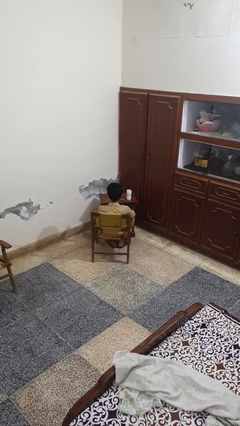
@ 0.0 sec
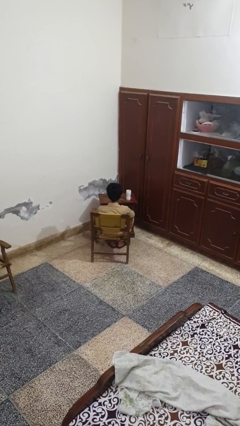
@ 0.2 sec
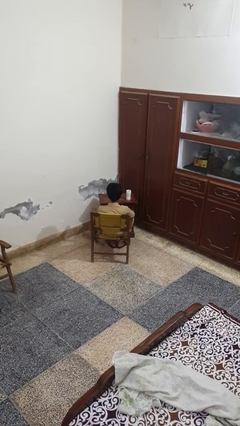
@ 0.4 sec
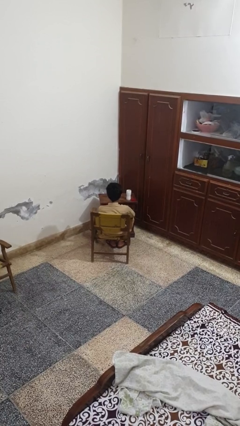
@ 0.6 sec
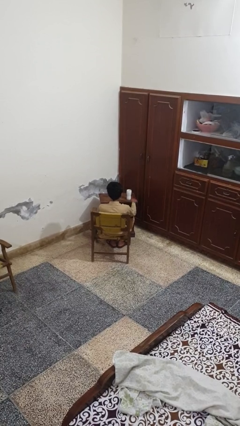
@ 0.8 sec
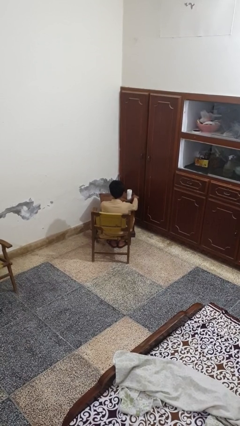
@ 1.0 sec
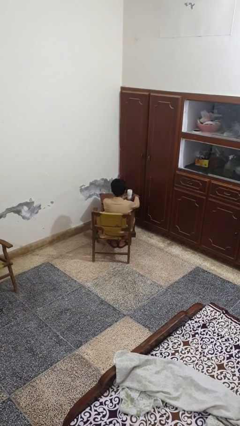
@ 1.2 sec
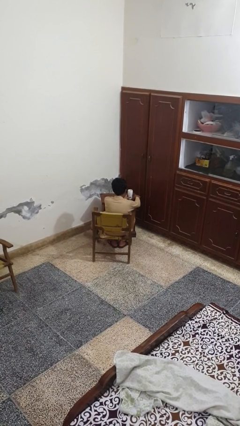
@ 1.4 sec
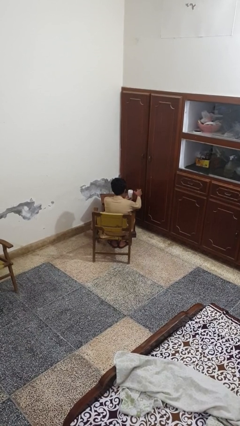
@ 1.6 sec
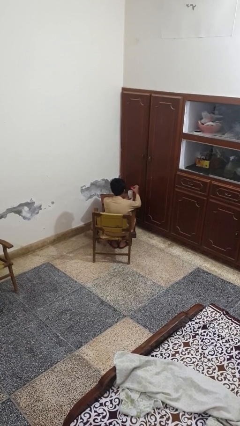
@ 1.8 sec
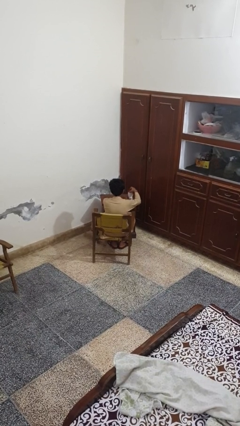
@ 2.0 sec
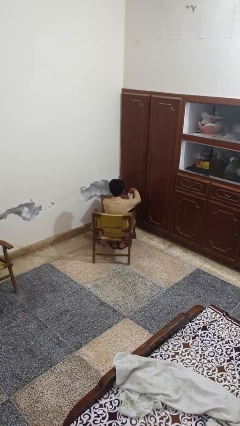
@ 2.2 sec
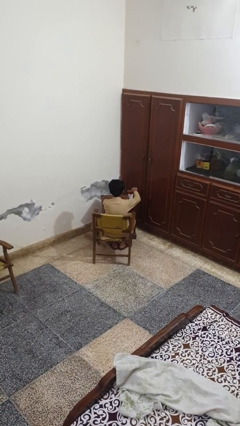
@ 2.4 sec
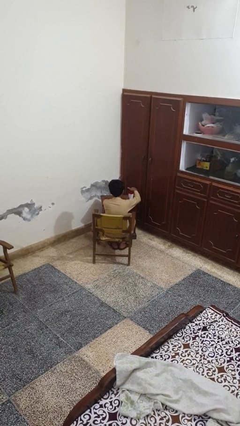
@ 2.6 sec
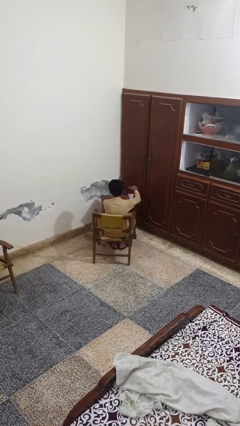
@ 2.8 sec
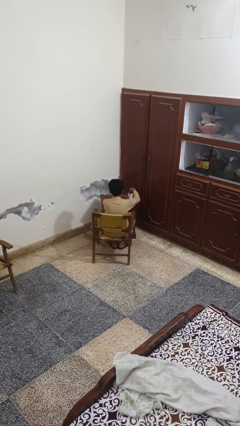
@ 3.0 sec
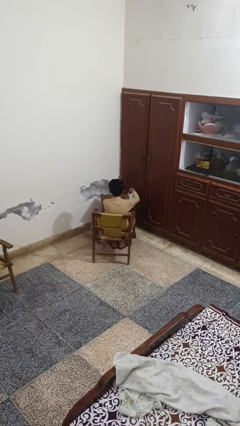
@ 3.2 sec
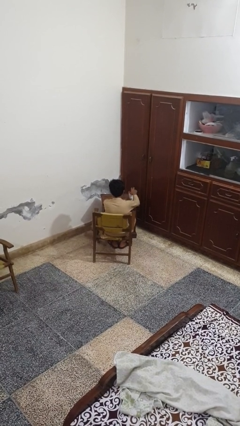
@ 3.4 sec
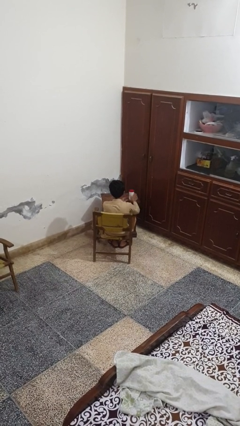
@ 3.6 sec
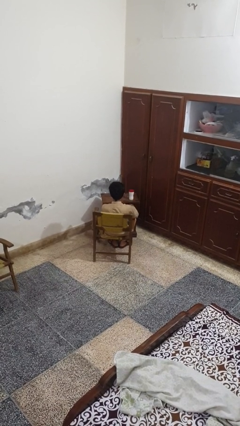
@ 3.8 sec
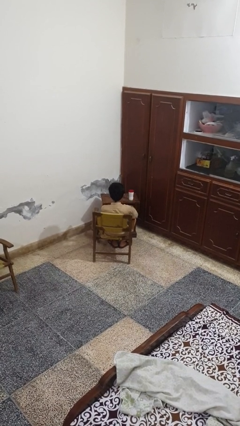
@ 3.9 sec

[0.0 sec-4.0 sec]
person closes jar

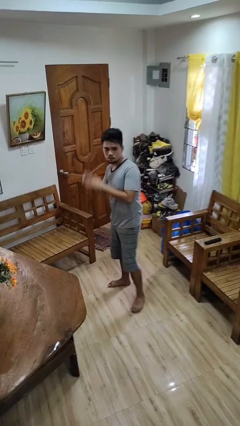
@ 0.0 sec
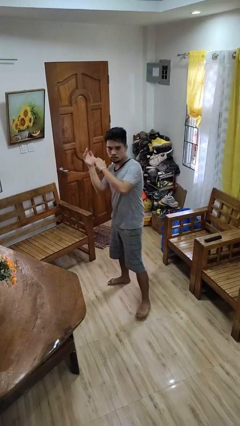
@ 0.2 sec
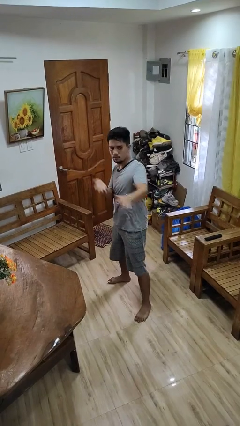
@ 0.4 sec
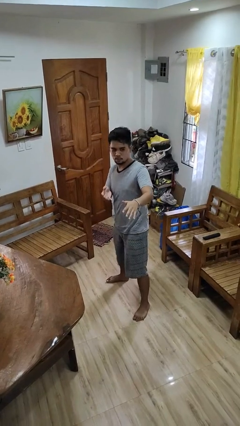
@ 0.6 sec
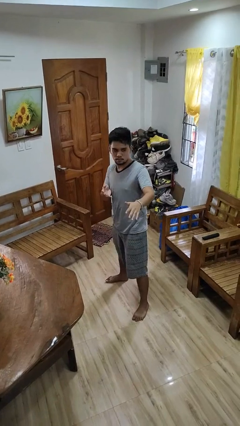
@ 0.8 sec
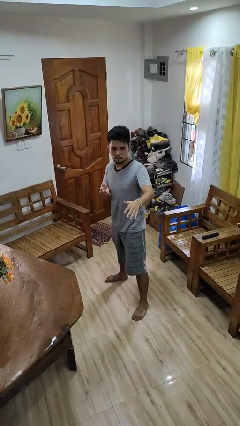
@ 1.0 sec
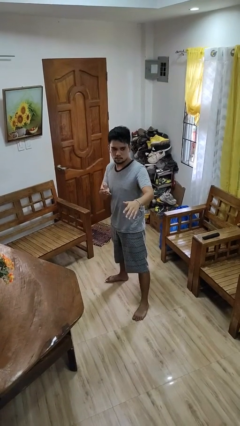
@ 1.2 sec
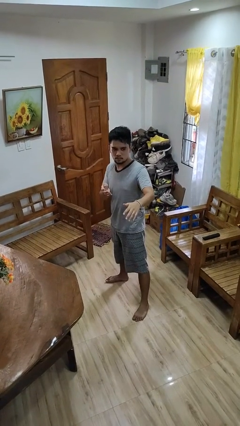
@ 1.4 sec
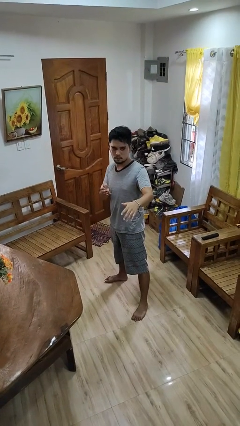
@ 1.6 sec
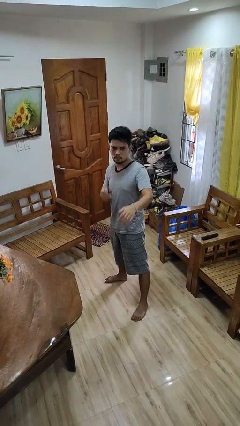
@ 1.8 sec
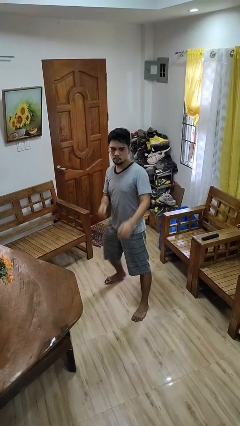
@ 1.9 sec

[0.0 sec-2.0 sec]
person karate chop

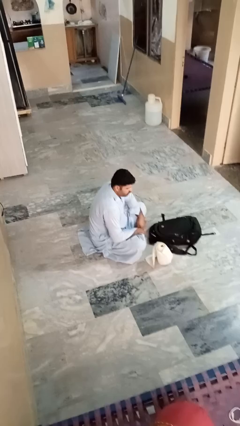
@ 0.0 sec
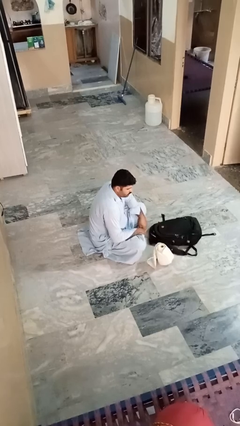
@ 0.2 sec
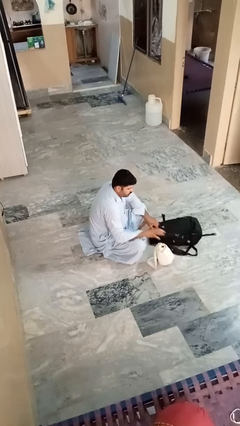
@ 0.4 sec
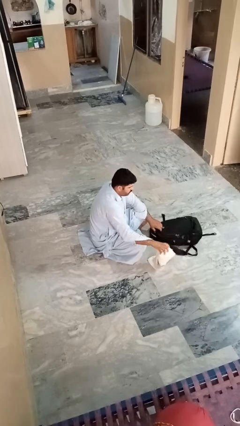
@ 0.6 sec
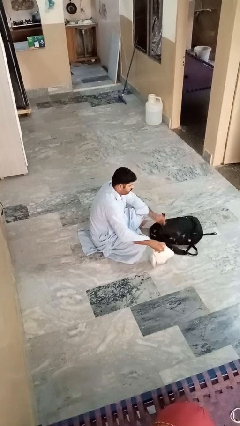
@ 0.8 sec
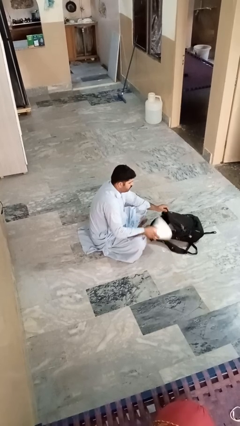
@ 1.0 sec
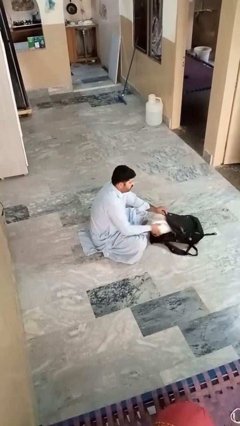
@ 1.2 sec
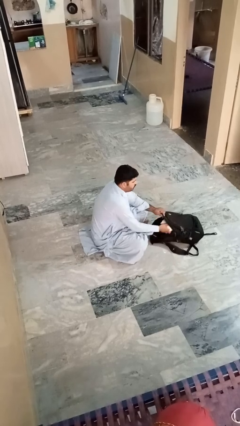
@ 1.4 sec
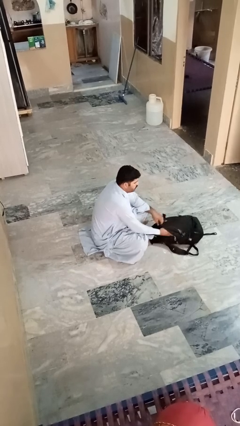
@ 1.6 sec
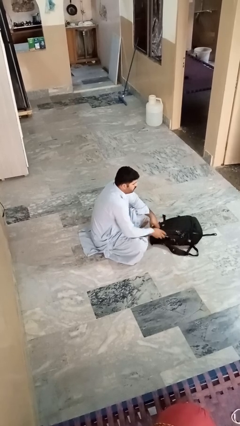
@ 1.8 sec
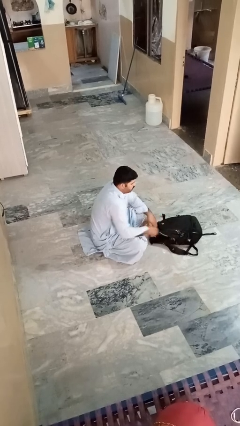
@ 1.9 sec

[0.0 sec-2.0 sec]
person puts object into bag

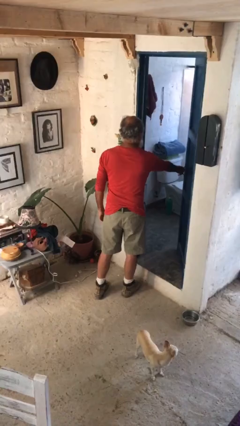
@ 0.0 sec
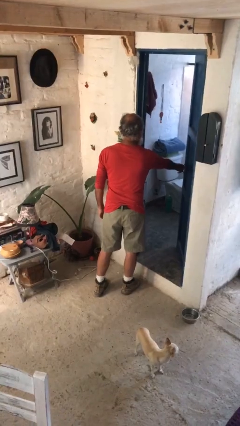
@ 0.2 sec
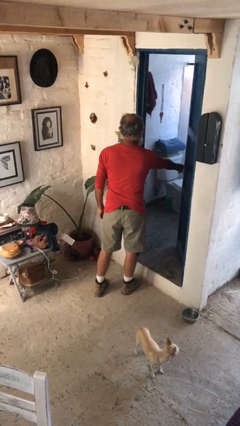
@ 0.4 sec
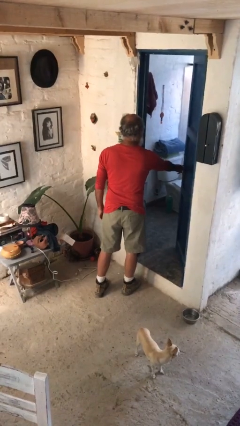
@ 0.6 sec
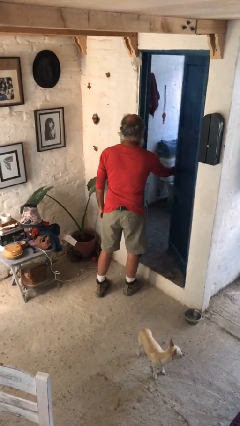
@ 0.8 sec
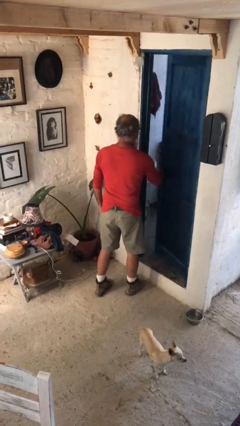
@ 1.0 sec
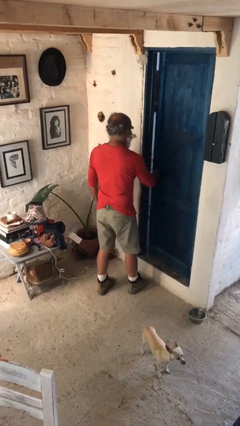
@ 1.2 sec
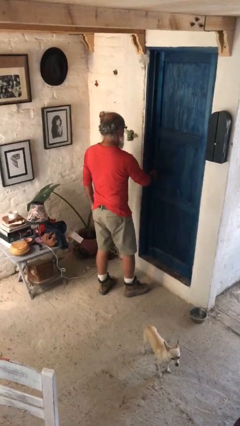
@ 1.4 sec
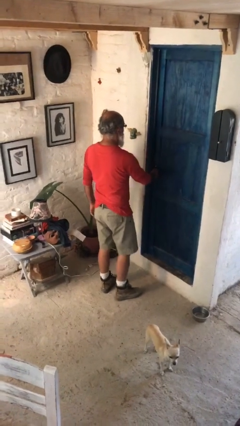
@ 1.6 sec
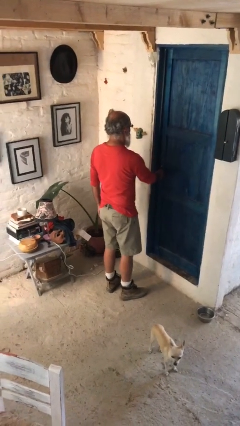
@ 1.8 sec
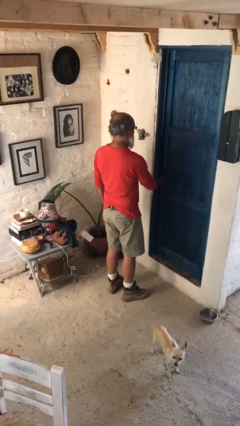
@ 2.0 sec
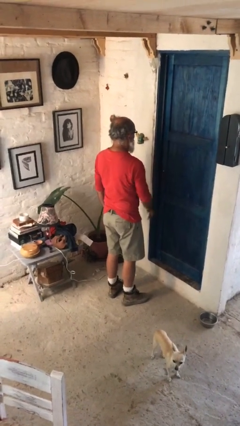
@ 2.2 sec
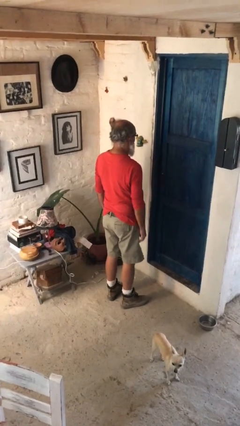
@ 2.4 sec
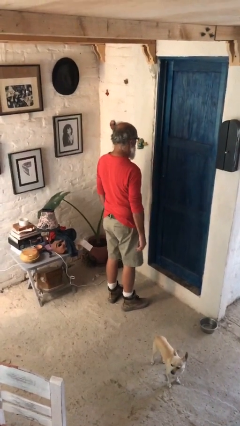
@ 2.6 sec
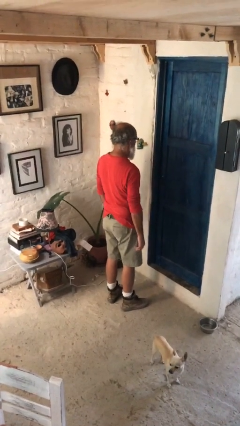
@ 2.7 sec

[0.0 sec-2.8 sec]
person closes facility door

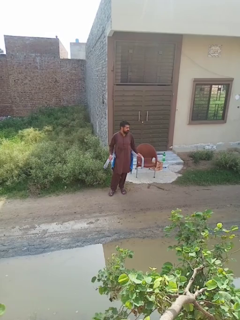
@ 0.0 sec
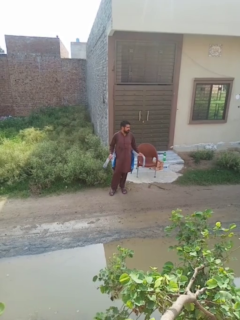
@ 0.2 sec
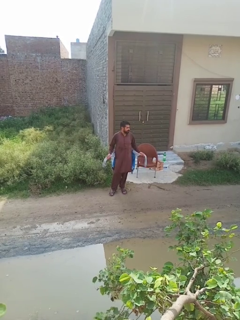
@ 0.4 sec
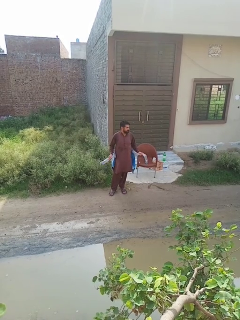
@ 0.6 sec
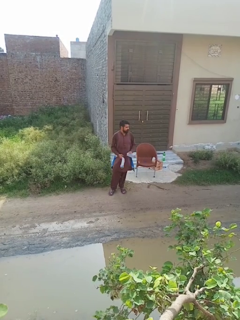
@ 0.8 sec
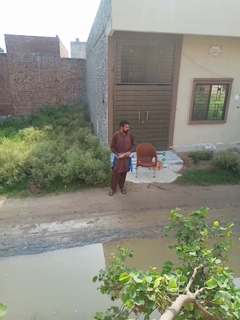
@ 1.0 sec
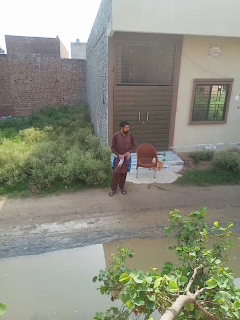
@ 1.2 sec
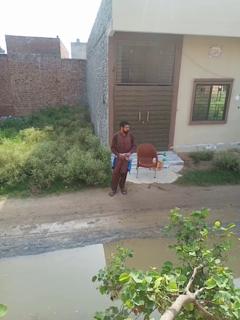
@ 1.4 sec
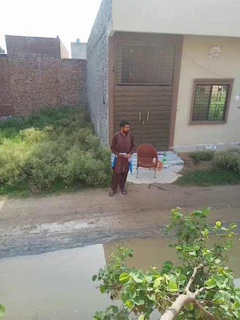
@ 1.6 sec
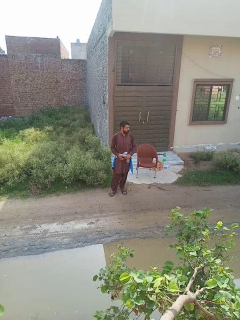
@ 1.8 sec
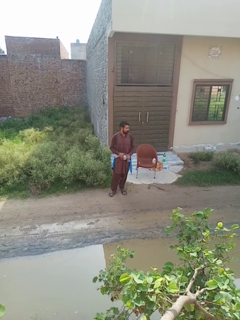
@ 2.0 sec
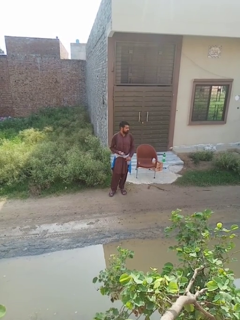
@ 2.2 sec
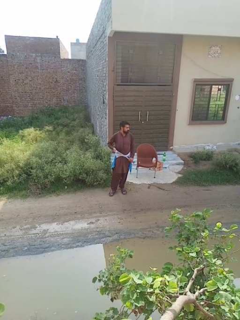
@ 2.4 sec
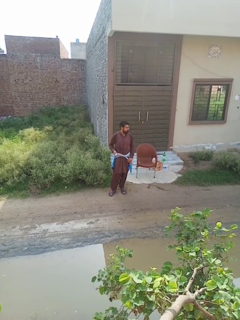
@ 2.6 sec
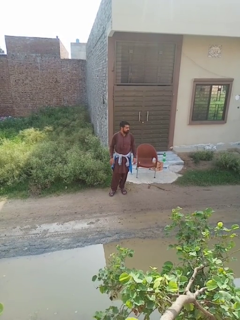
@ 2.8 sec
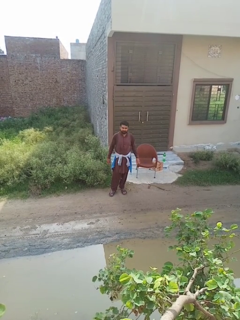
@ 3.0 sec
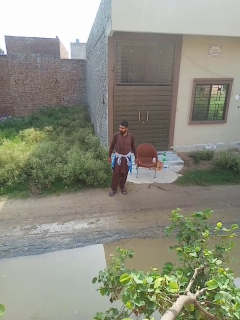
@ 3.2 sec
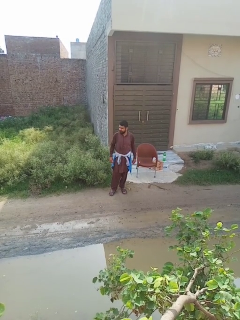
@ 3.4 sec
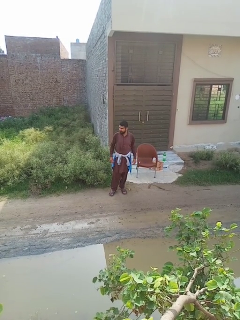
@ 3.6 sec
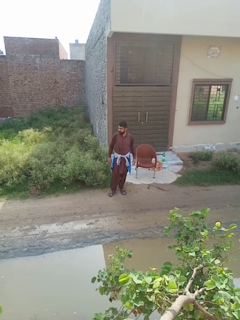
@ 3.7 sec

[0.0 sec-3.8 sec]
person ties jacket around waist

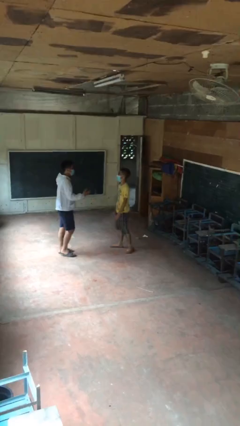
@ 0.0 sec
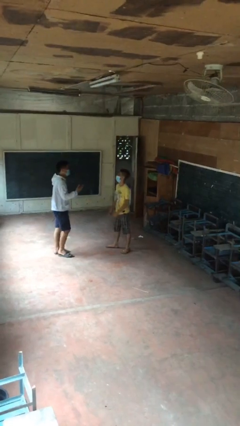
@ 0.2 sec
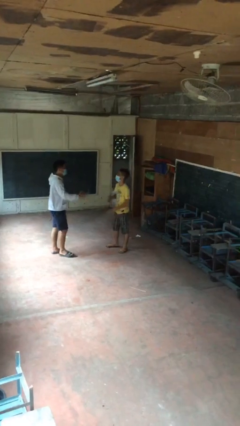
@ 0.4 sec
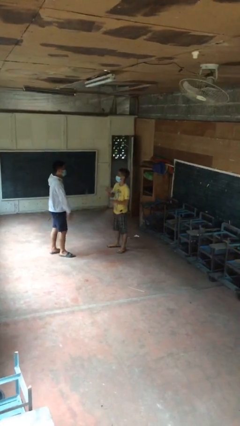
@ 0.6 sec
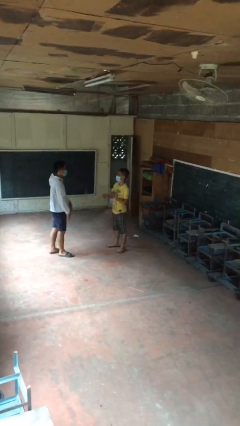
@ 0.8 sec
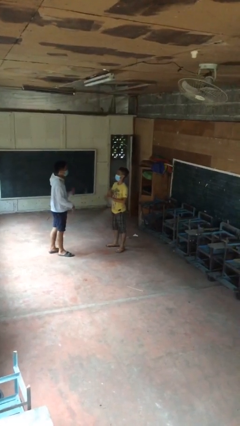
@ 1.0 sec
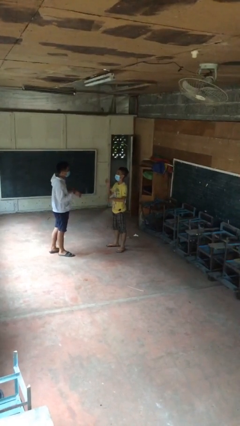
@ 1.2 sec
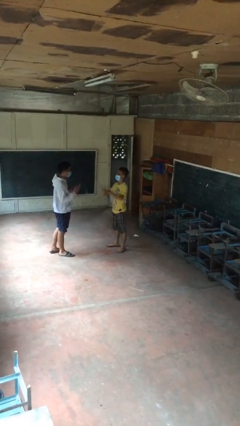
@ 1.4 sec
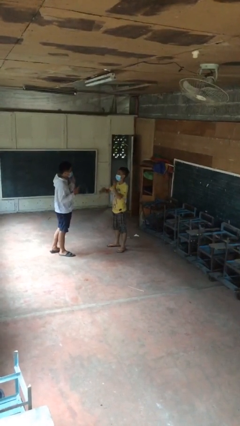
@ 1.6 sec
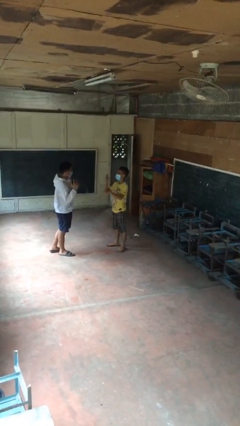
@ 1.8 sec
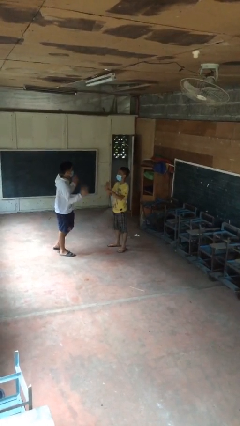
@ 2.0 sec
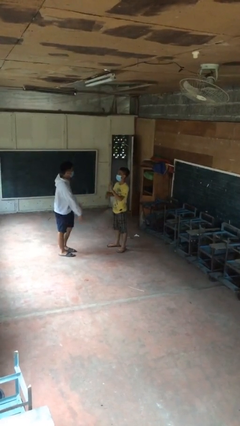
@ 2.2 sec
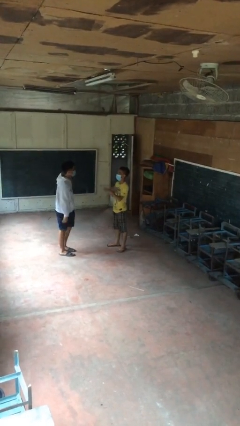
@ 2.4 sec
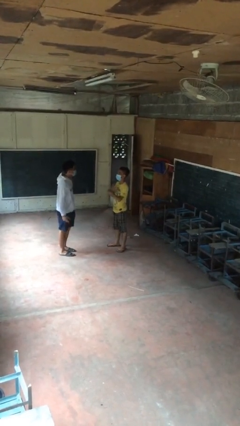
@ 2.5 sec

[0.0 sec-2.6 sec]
person talks to person

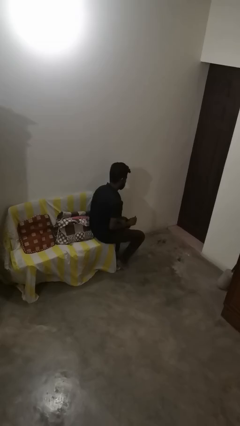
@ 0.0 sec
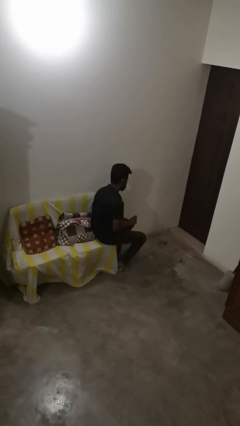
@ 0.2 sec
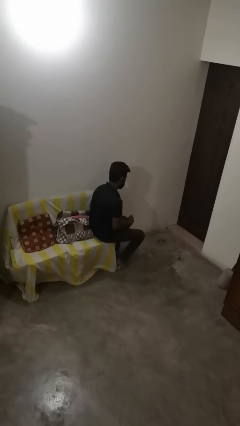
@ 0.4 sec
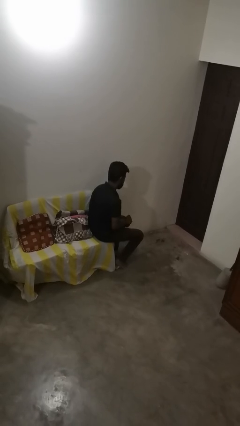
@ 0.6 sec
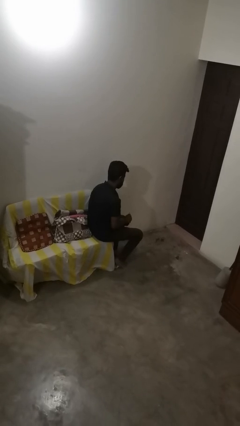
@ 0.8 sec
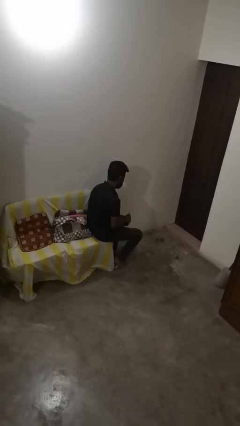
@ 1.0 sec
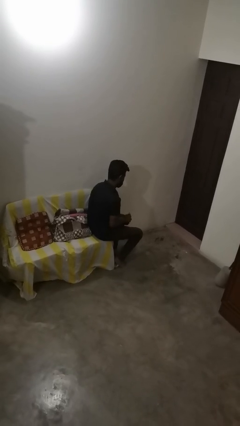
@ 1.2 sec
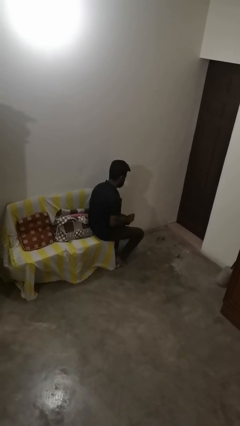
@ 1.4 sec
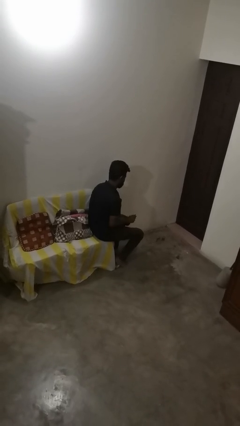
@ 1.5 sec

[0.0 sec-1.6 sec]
person stirs mug
